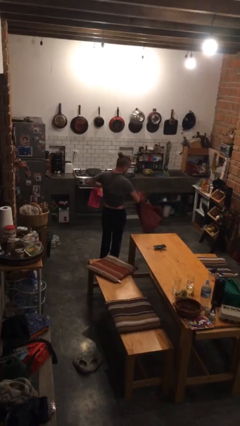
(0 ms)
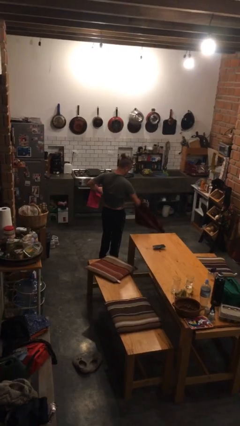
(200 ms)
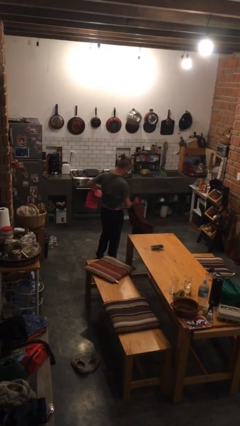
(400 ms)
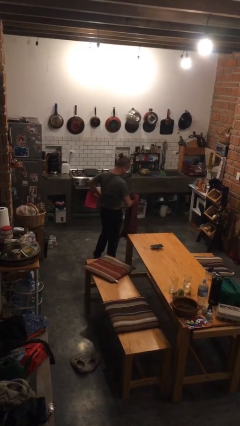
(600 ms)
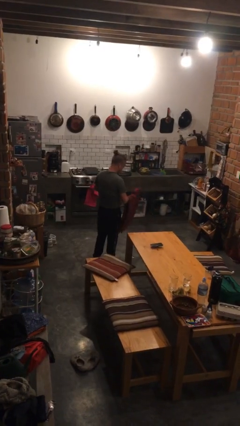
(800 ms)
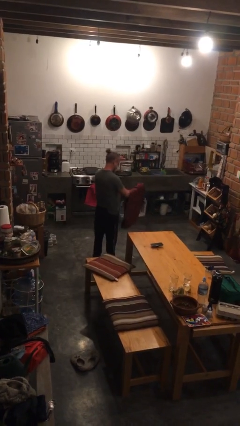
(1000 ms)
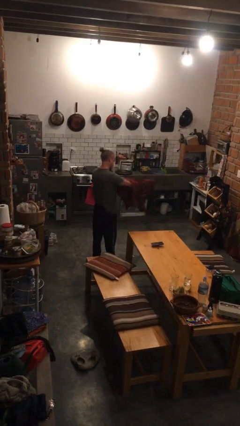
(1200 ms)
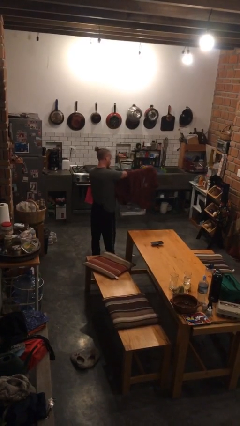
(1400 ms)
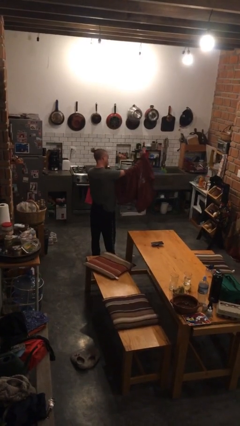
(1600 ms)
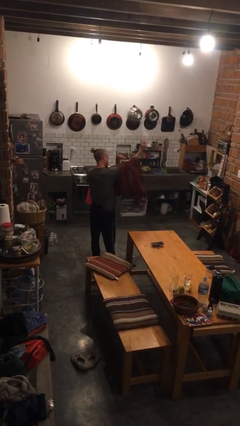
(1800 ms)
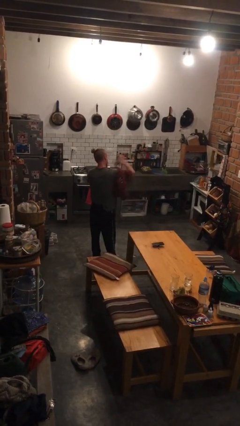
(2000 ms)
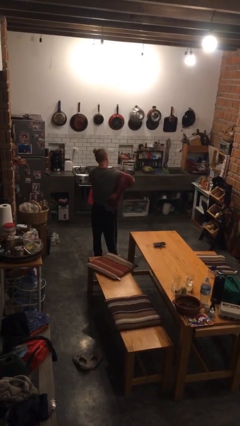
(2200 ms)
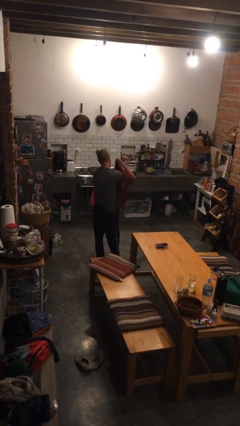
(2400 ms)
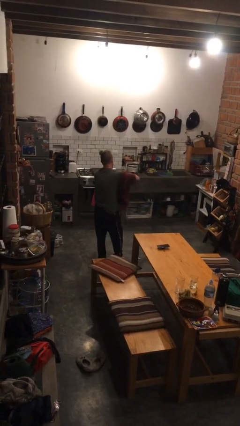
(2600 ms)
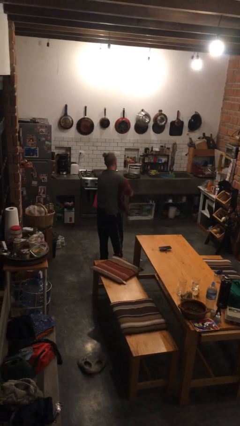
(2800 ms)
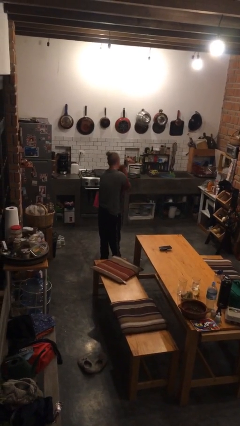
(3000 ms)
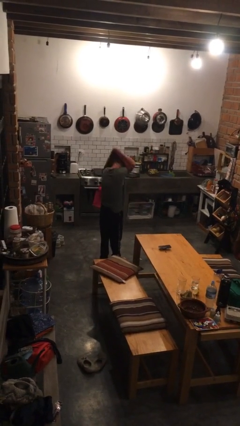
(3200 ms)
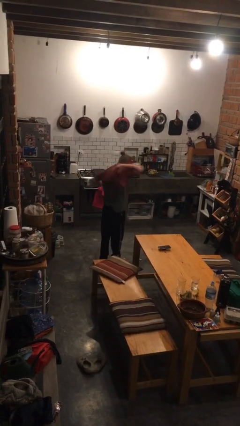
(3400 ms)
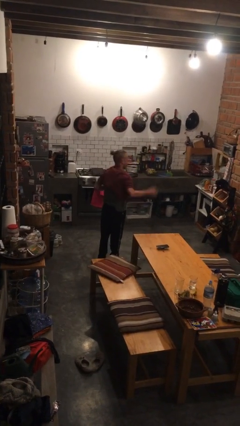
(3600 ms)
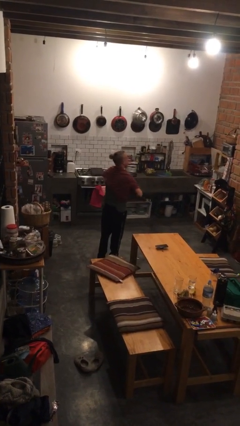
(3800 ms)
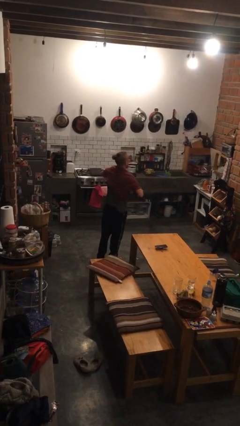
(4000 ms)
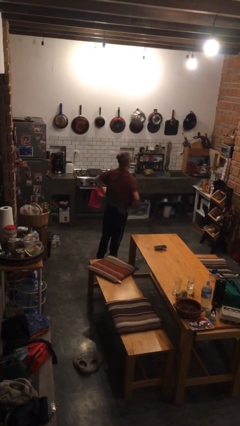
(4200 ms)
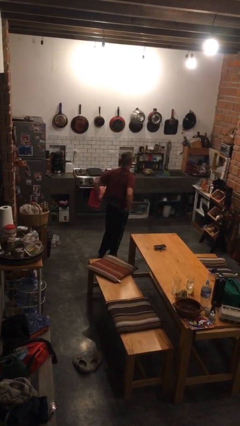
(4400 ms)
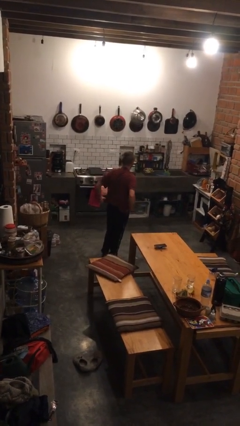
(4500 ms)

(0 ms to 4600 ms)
person puts on shirt

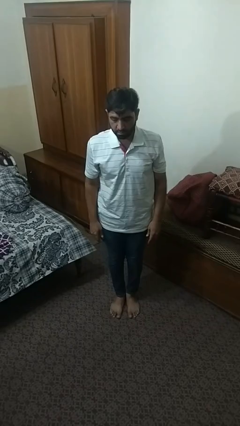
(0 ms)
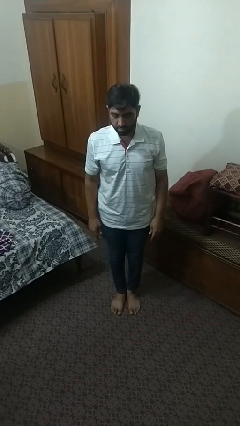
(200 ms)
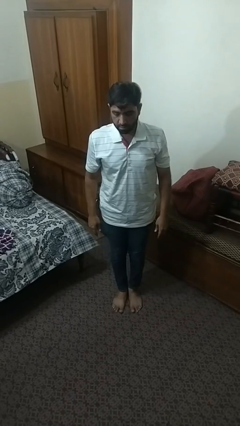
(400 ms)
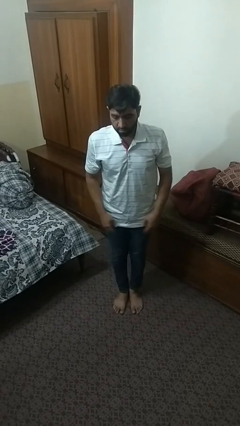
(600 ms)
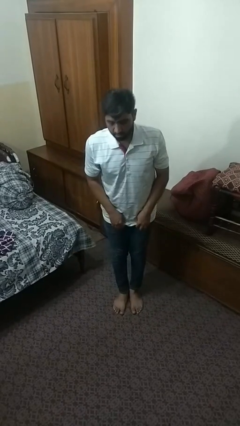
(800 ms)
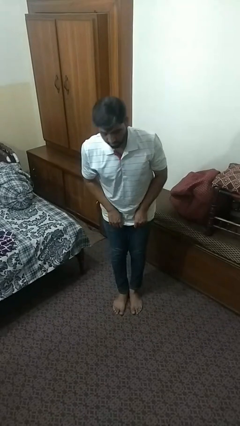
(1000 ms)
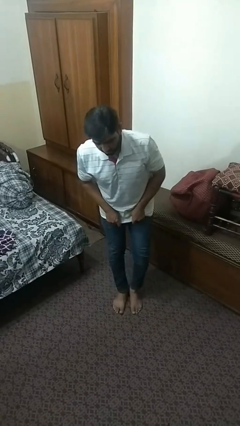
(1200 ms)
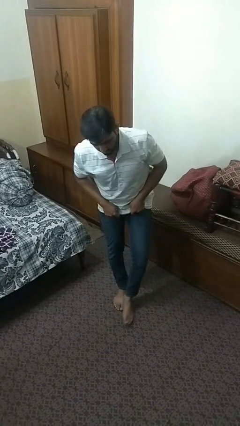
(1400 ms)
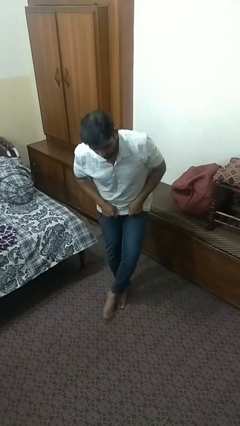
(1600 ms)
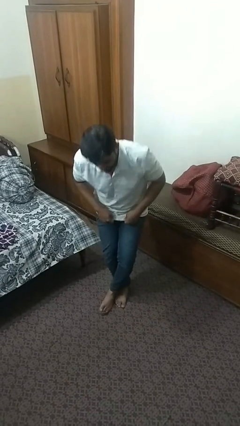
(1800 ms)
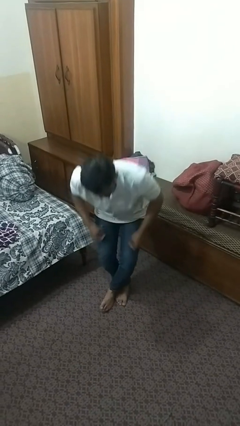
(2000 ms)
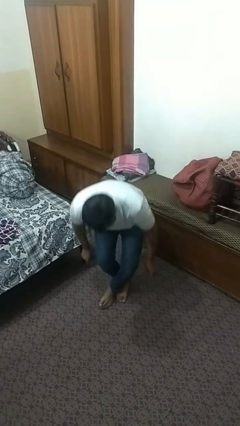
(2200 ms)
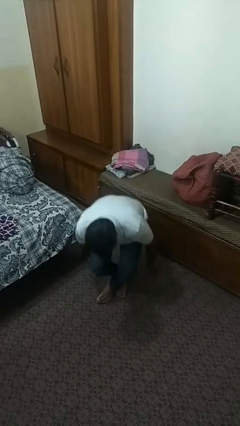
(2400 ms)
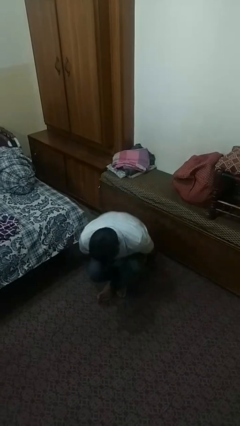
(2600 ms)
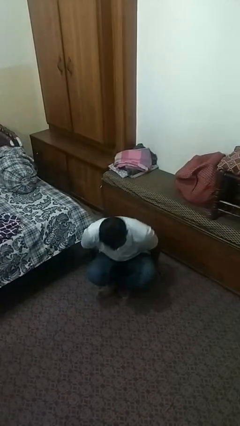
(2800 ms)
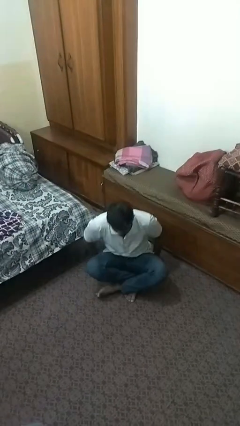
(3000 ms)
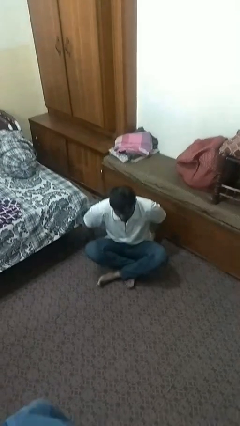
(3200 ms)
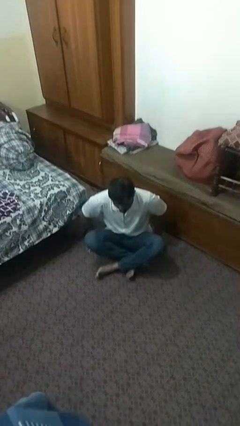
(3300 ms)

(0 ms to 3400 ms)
person sits crisscross

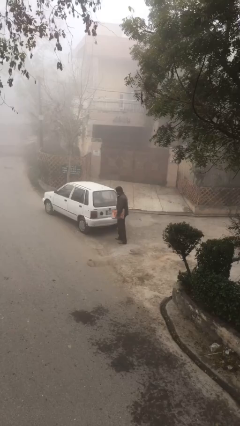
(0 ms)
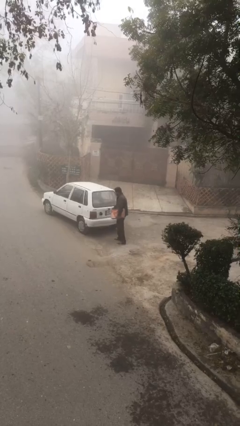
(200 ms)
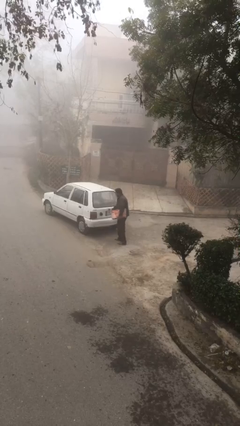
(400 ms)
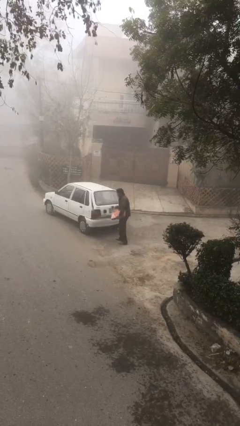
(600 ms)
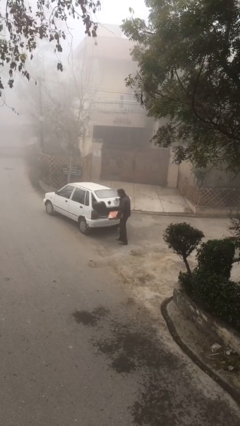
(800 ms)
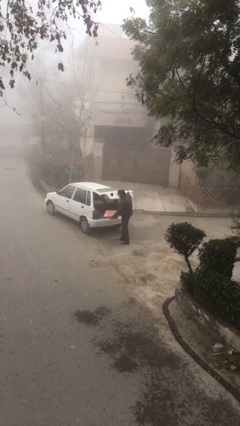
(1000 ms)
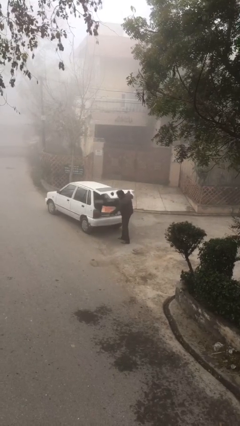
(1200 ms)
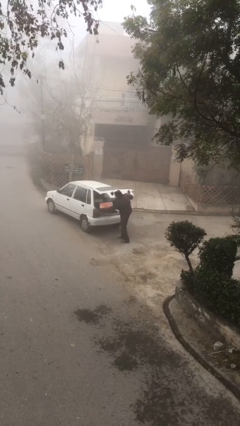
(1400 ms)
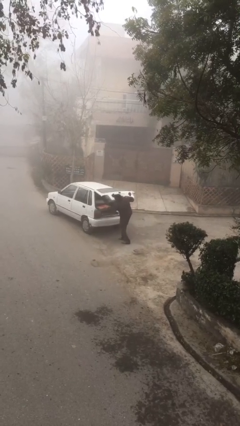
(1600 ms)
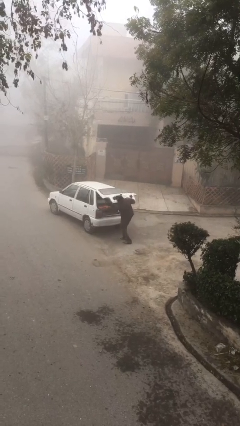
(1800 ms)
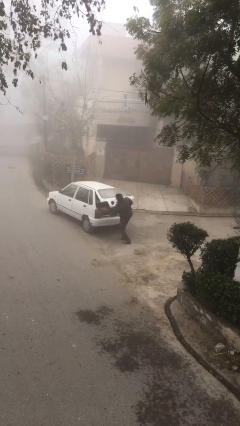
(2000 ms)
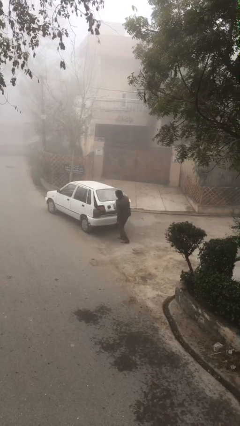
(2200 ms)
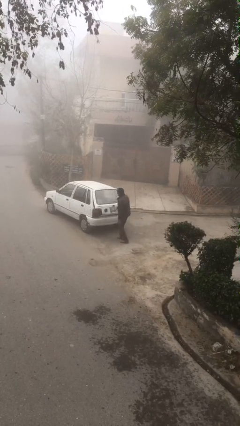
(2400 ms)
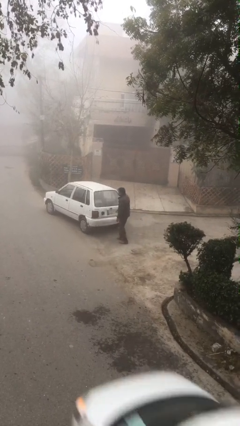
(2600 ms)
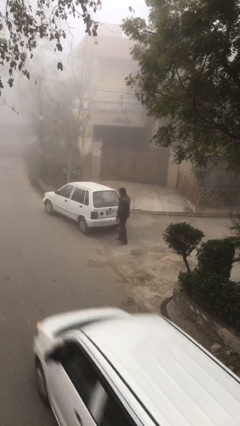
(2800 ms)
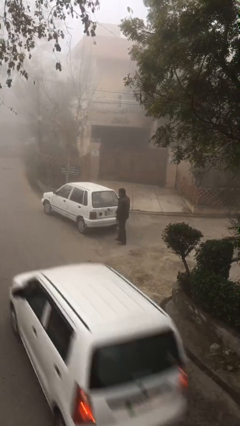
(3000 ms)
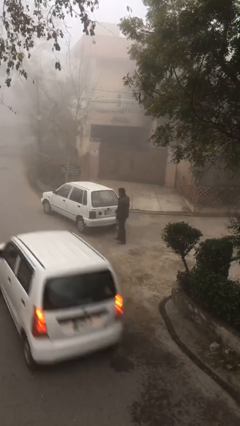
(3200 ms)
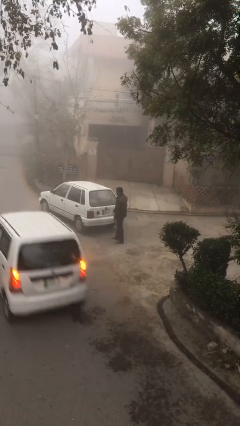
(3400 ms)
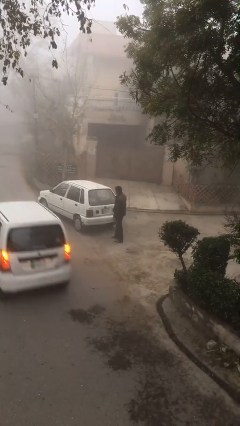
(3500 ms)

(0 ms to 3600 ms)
person loads car

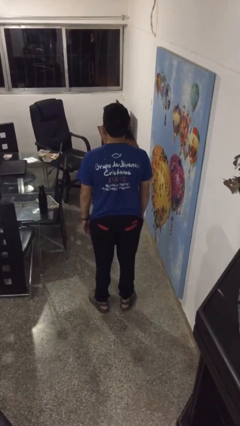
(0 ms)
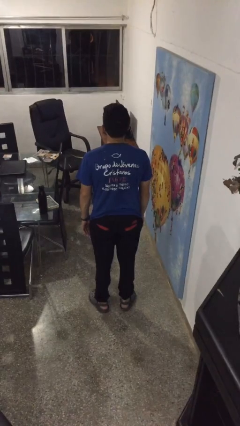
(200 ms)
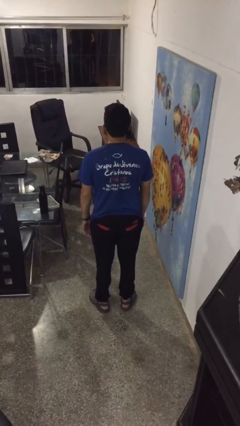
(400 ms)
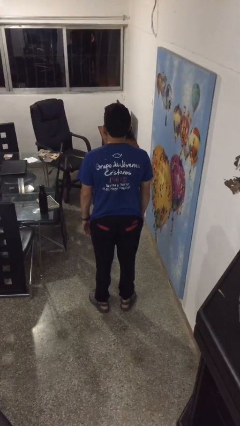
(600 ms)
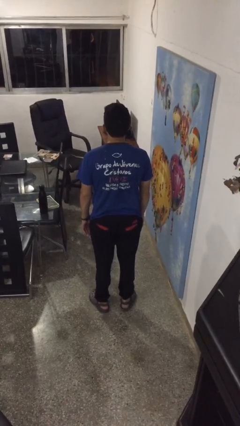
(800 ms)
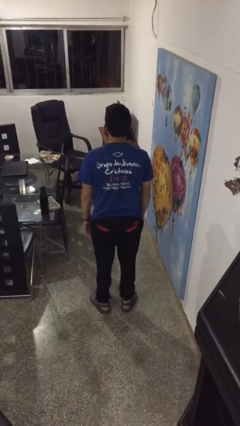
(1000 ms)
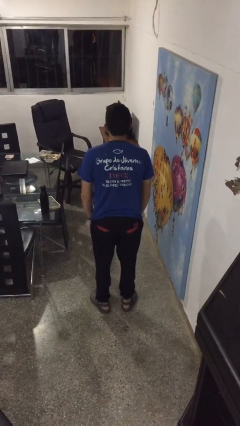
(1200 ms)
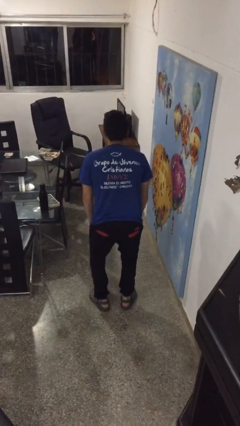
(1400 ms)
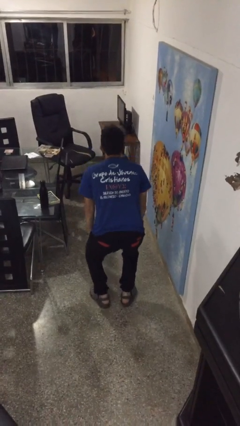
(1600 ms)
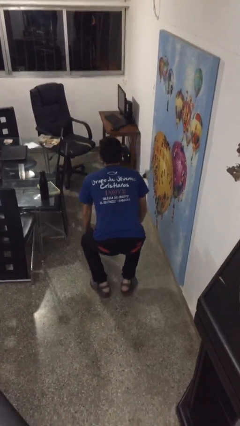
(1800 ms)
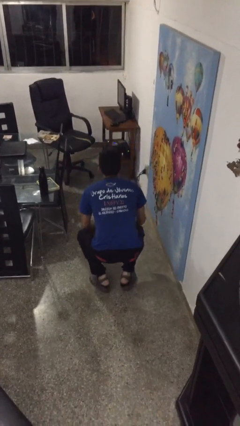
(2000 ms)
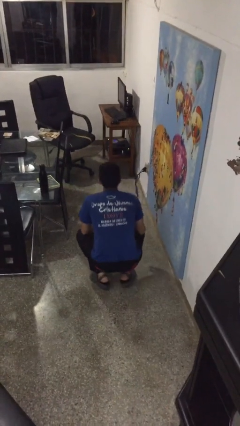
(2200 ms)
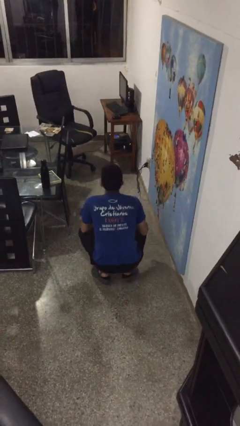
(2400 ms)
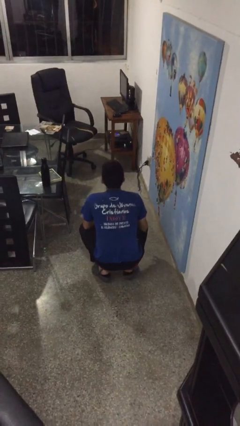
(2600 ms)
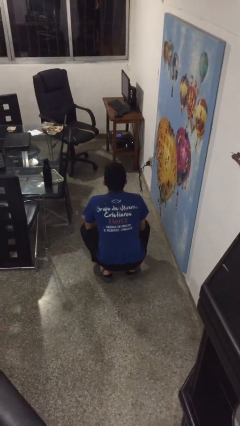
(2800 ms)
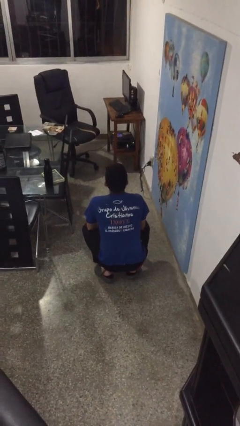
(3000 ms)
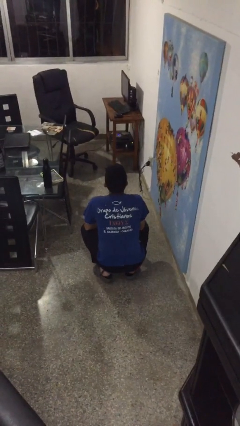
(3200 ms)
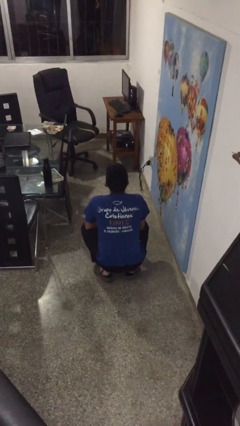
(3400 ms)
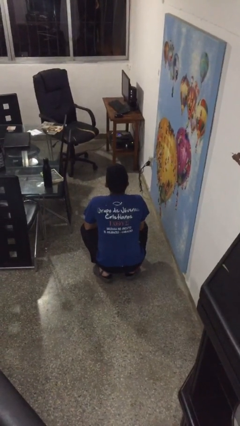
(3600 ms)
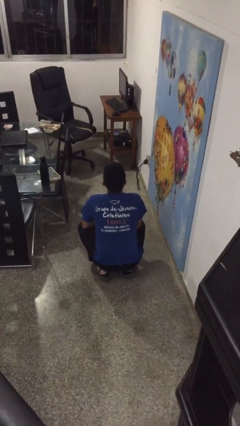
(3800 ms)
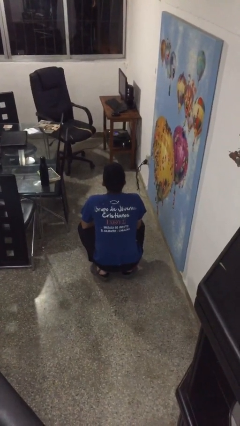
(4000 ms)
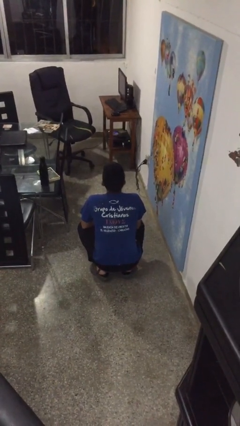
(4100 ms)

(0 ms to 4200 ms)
person squats

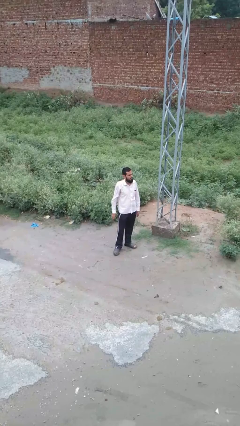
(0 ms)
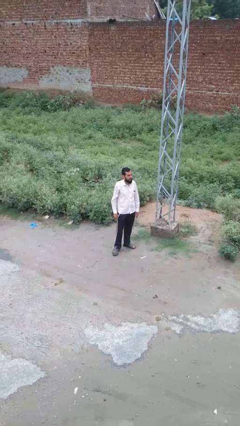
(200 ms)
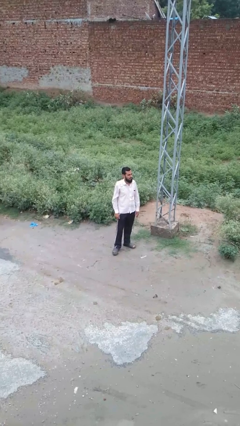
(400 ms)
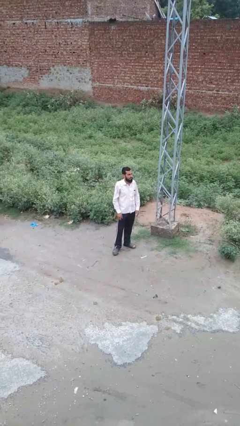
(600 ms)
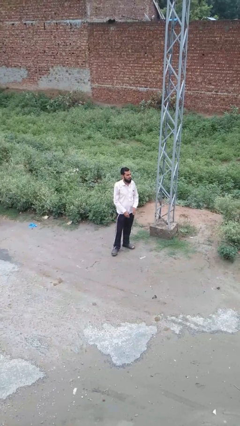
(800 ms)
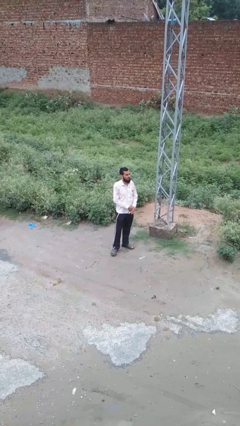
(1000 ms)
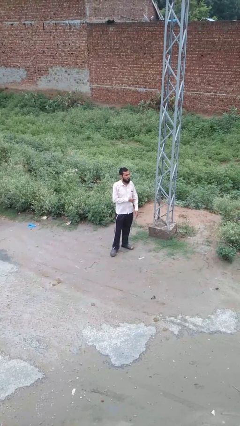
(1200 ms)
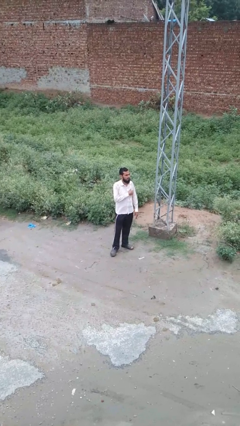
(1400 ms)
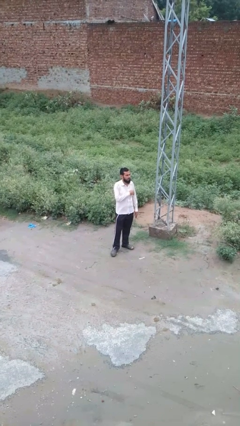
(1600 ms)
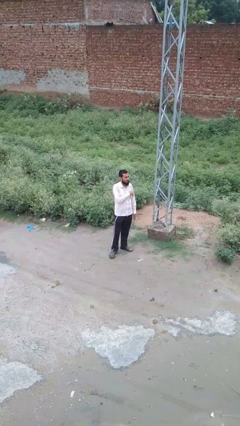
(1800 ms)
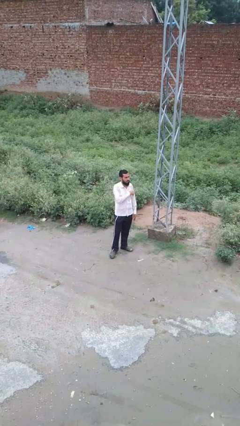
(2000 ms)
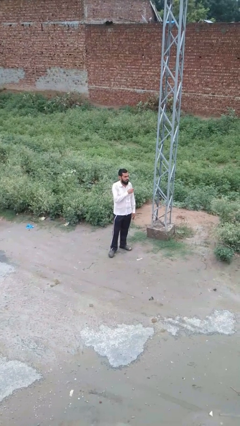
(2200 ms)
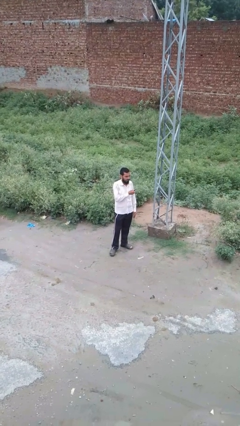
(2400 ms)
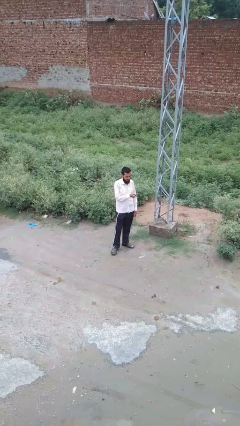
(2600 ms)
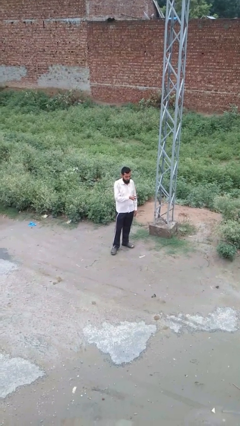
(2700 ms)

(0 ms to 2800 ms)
person takes phone from pocket
